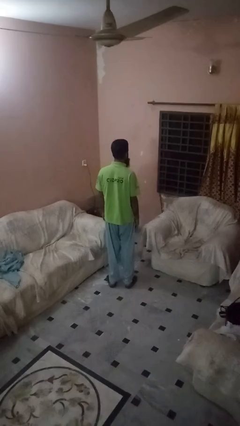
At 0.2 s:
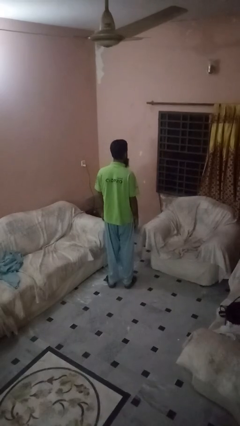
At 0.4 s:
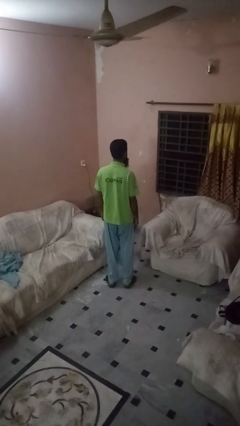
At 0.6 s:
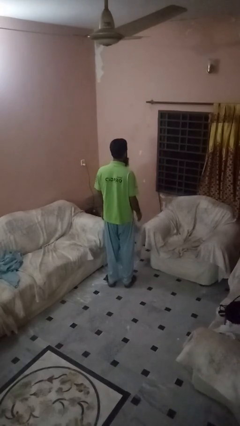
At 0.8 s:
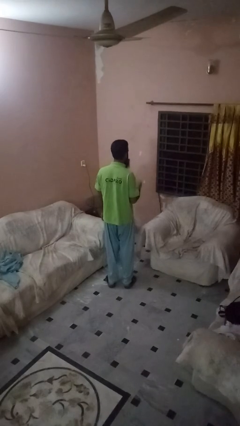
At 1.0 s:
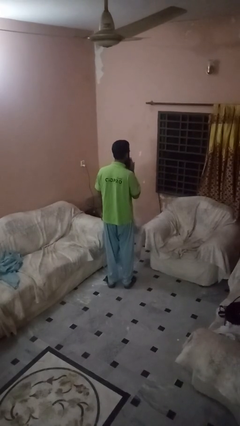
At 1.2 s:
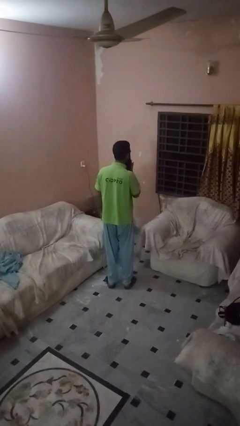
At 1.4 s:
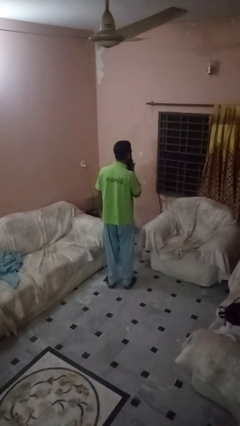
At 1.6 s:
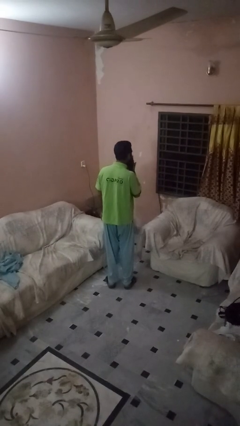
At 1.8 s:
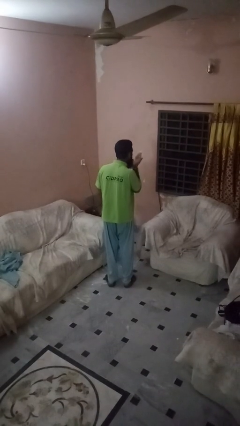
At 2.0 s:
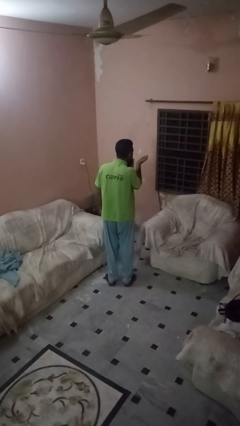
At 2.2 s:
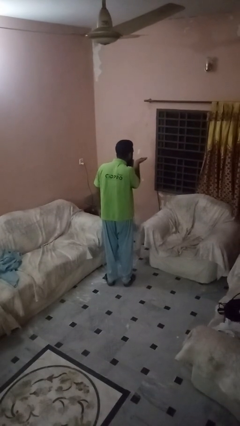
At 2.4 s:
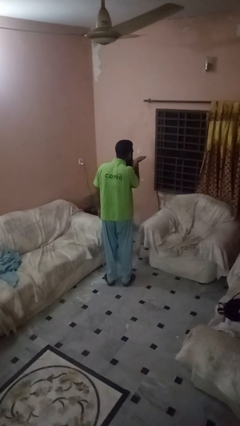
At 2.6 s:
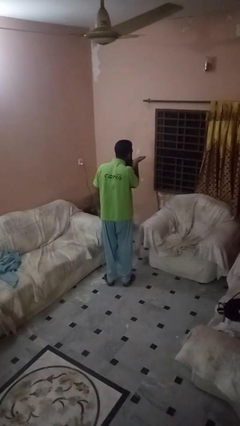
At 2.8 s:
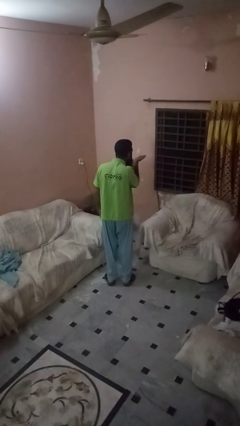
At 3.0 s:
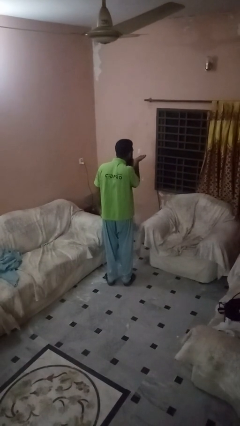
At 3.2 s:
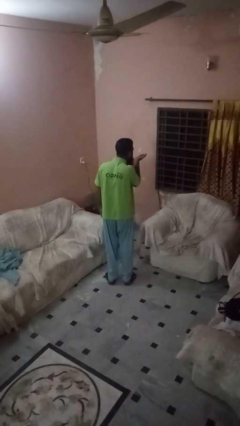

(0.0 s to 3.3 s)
person gestures blow kiss

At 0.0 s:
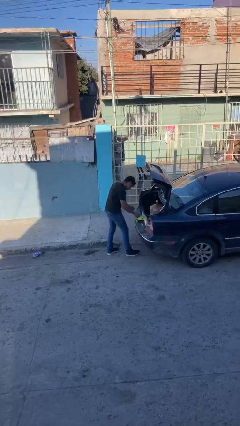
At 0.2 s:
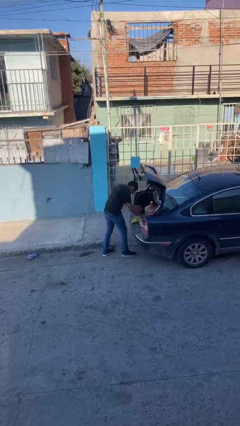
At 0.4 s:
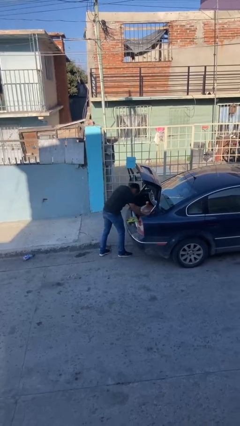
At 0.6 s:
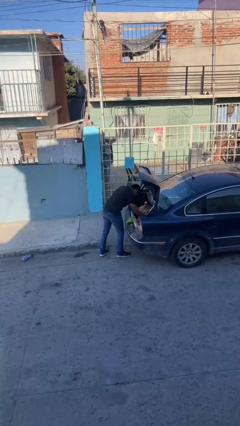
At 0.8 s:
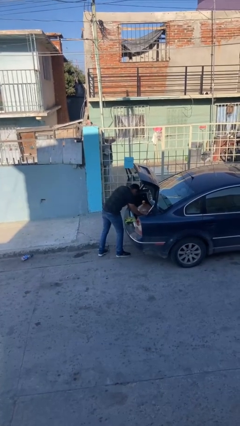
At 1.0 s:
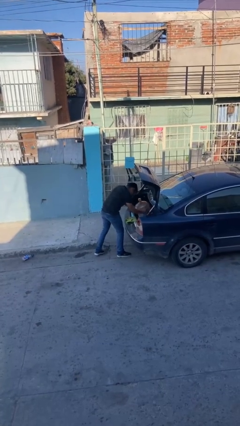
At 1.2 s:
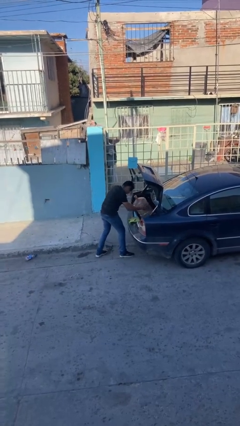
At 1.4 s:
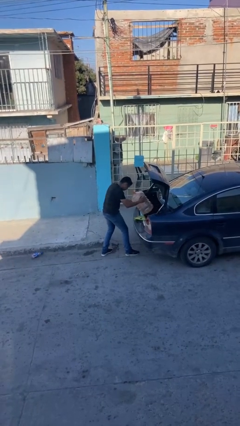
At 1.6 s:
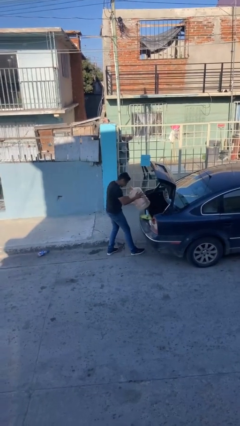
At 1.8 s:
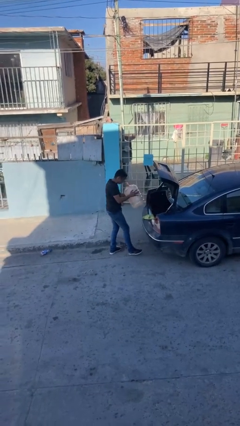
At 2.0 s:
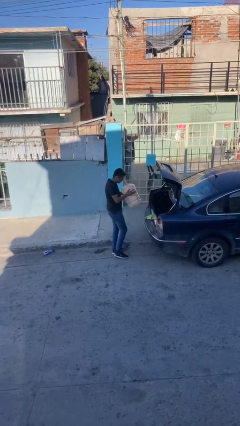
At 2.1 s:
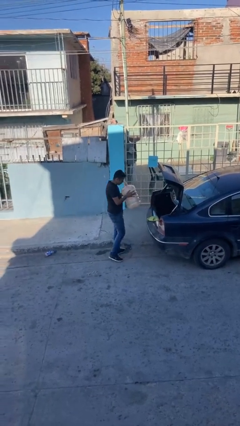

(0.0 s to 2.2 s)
person unloads car

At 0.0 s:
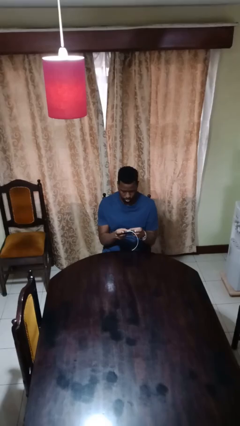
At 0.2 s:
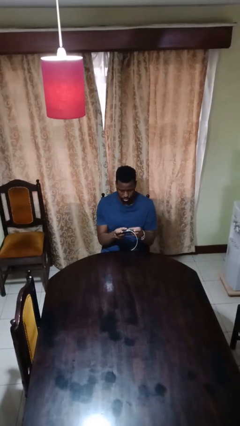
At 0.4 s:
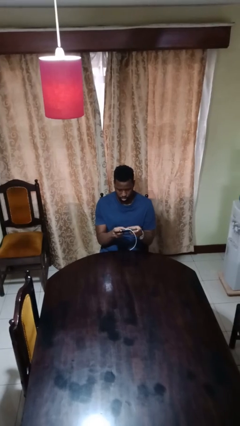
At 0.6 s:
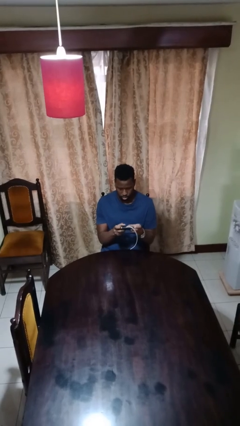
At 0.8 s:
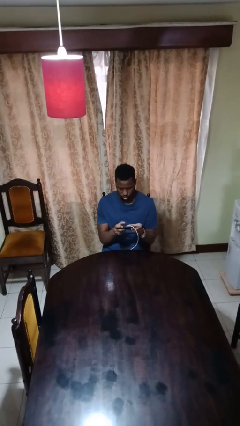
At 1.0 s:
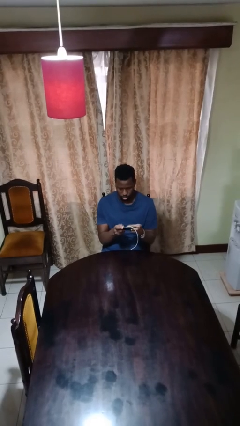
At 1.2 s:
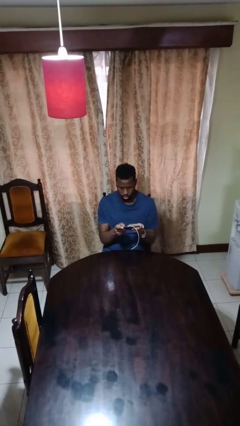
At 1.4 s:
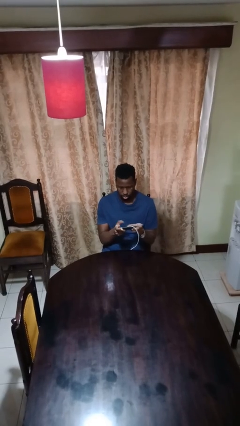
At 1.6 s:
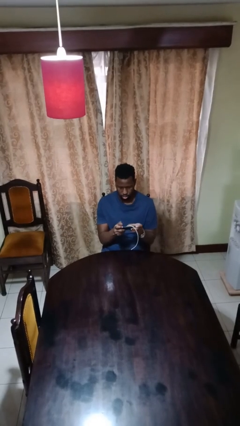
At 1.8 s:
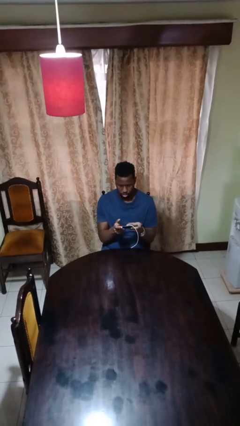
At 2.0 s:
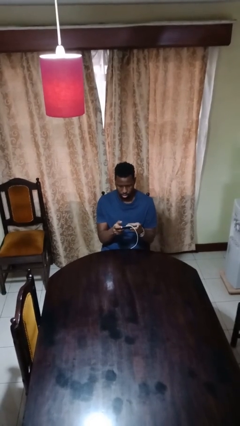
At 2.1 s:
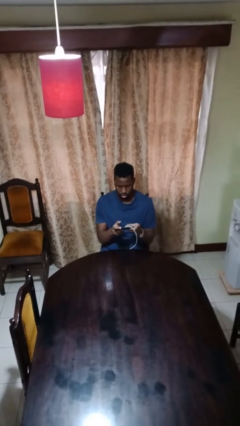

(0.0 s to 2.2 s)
person interacts with handheld game

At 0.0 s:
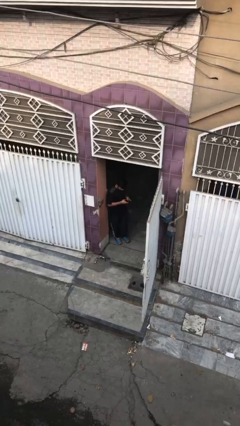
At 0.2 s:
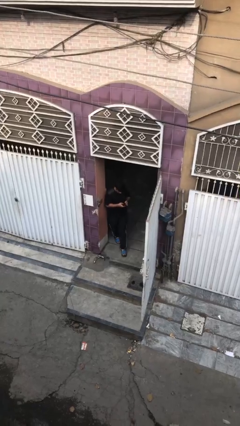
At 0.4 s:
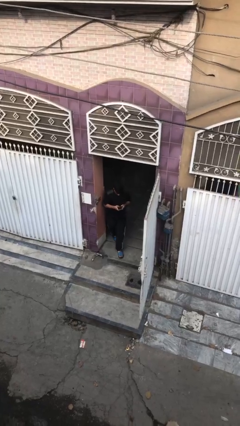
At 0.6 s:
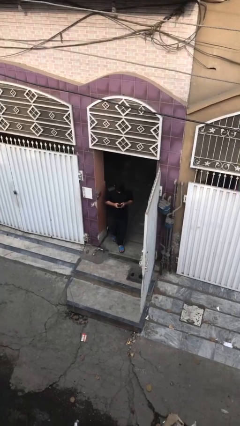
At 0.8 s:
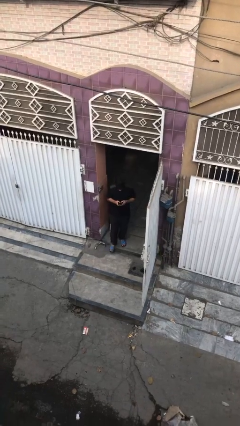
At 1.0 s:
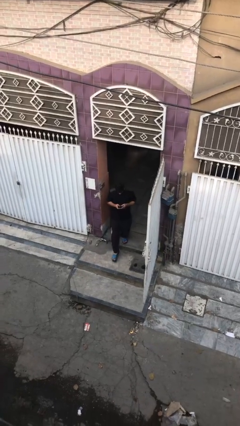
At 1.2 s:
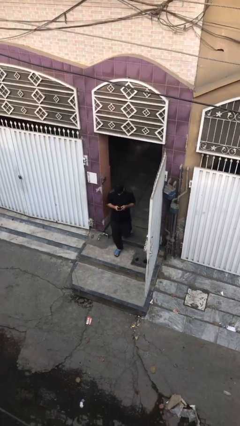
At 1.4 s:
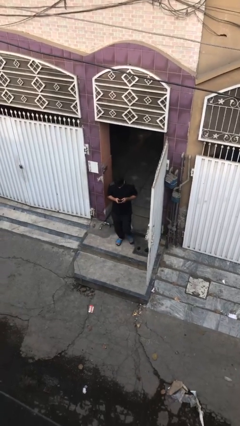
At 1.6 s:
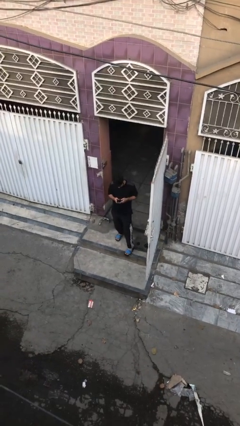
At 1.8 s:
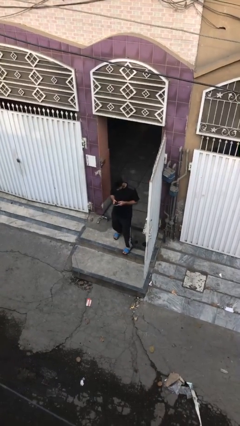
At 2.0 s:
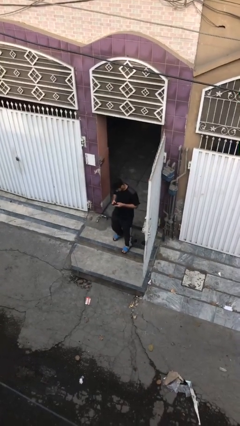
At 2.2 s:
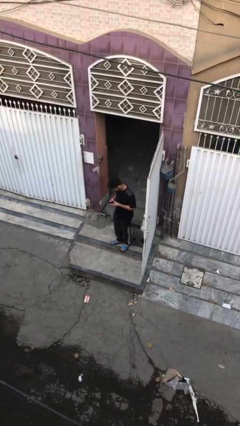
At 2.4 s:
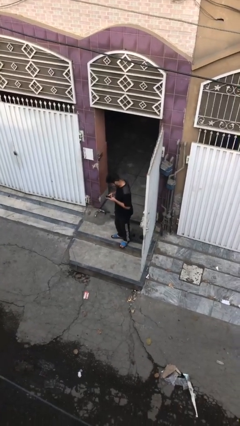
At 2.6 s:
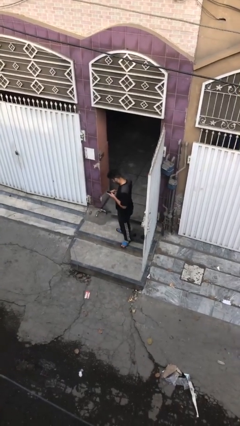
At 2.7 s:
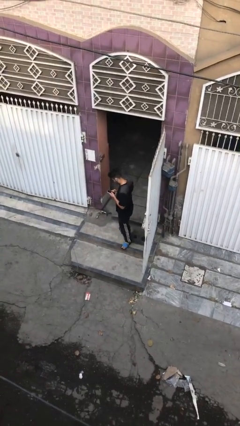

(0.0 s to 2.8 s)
person enters scene through structure

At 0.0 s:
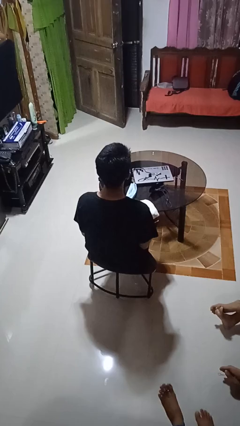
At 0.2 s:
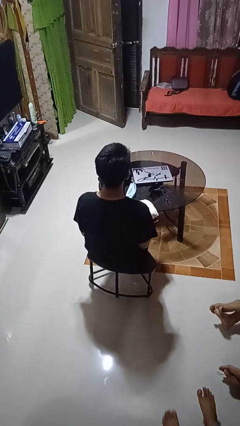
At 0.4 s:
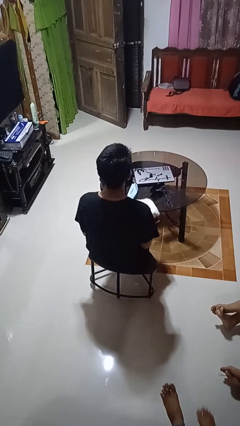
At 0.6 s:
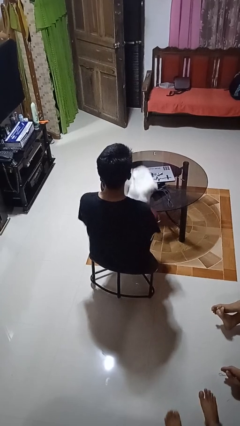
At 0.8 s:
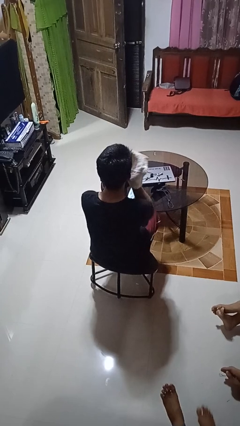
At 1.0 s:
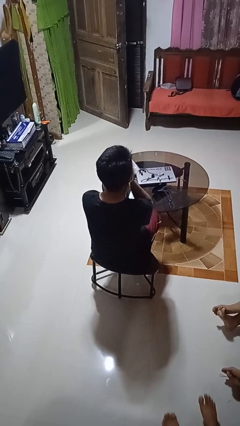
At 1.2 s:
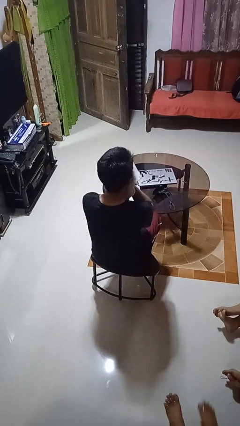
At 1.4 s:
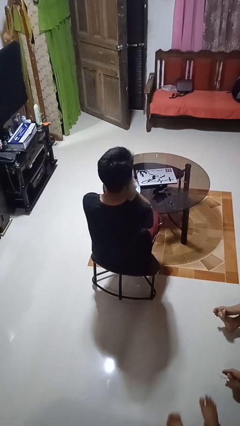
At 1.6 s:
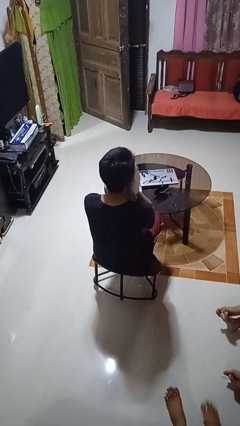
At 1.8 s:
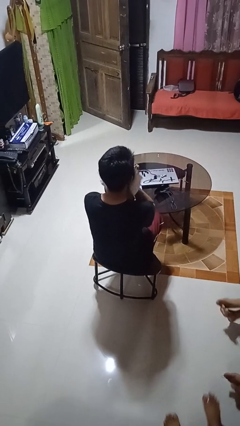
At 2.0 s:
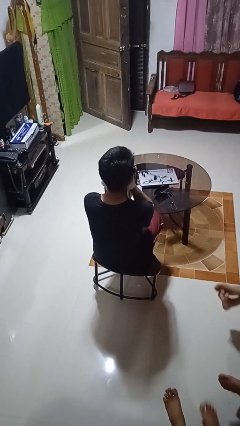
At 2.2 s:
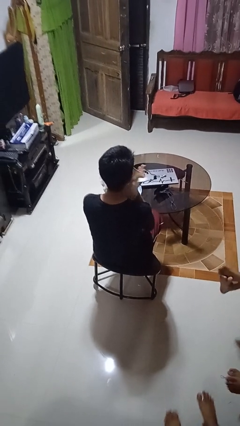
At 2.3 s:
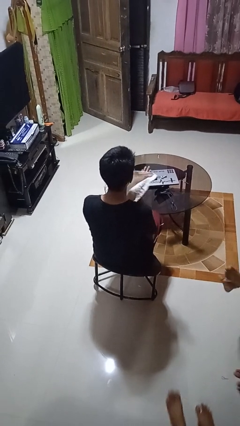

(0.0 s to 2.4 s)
person wipes mouth with napkin

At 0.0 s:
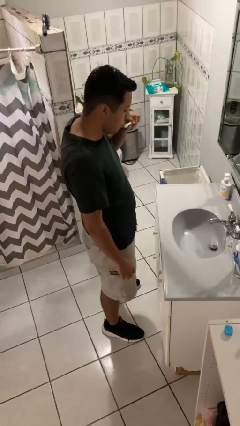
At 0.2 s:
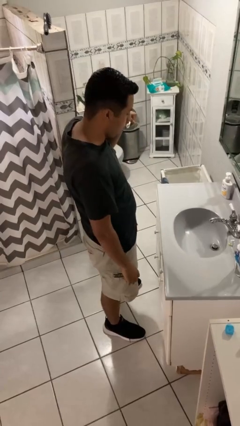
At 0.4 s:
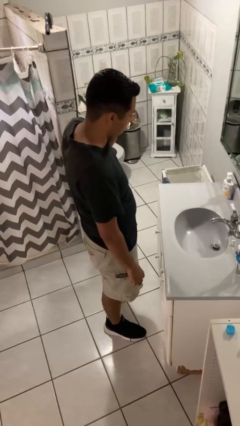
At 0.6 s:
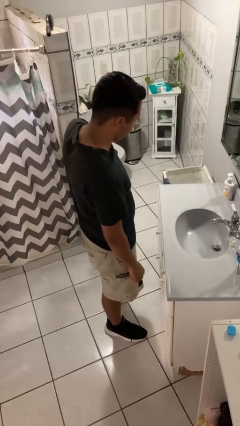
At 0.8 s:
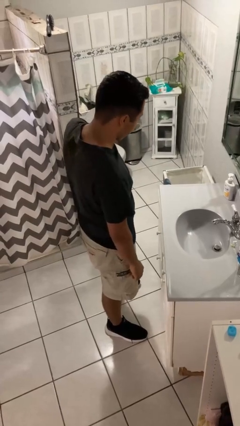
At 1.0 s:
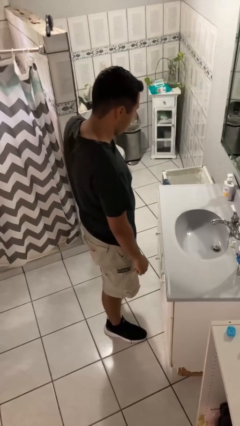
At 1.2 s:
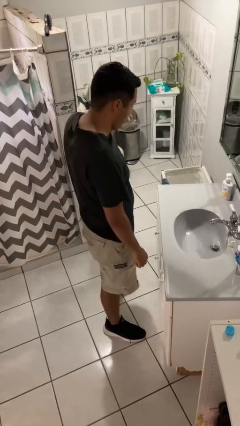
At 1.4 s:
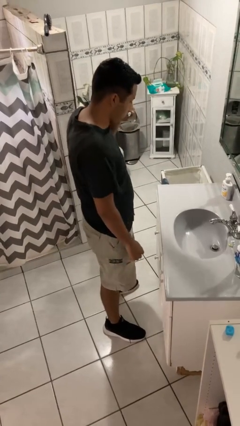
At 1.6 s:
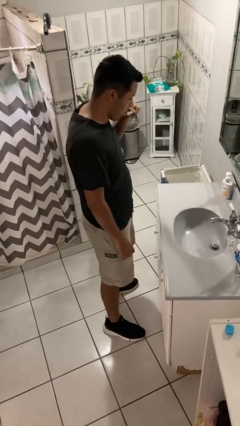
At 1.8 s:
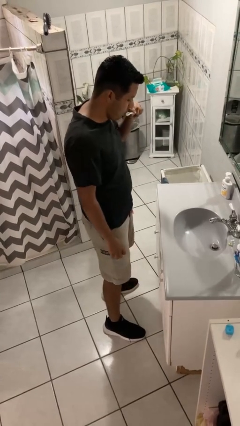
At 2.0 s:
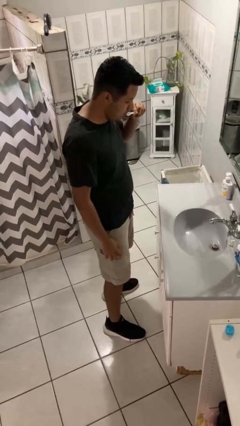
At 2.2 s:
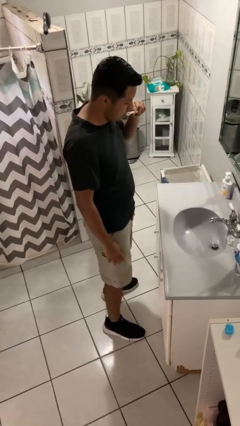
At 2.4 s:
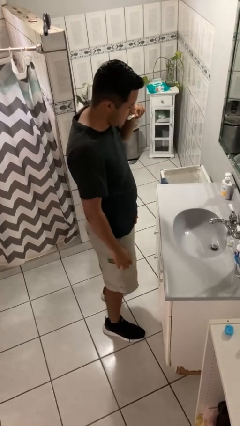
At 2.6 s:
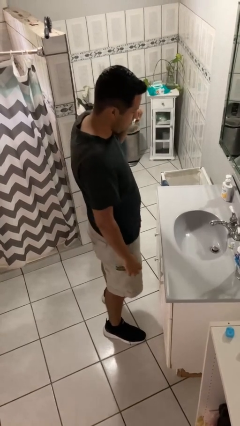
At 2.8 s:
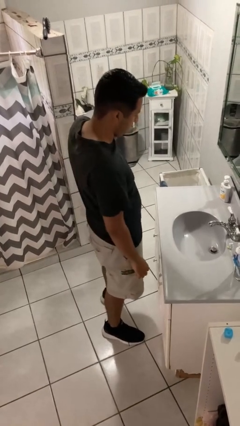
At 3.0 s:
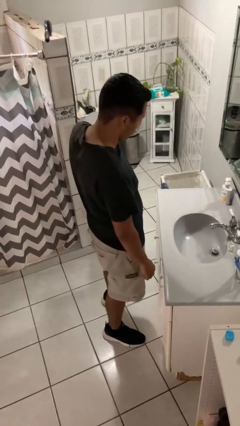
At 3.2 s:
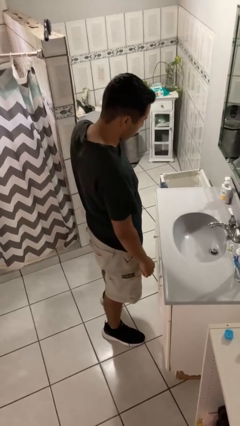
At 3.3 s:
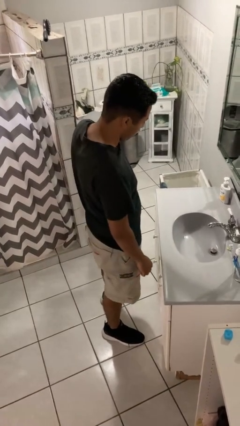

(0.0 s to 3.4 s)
person brushes teeth

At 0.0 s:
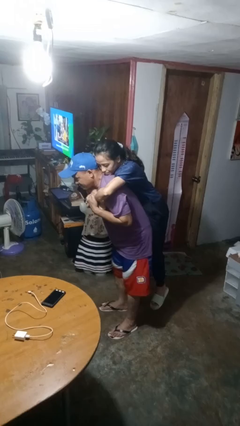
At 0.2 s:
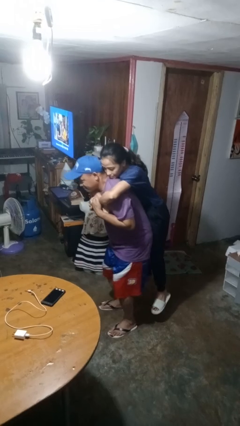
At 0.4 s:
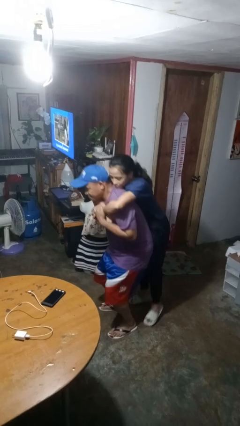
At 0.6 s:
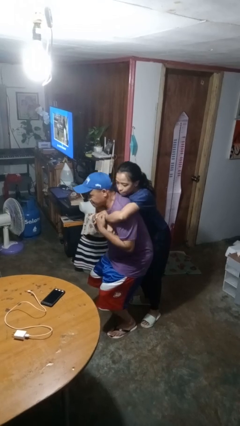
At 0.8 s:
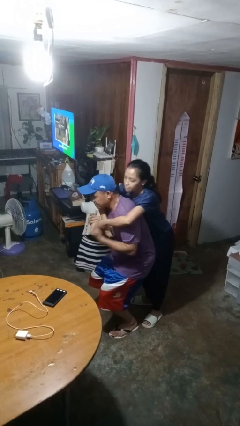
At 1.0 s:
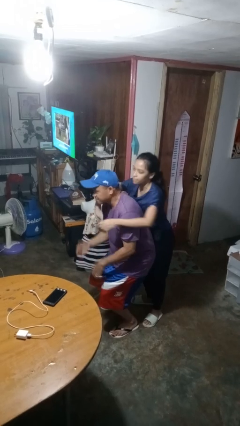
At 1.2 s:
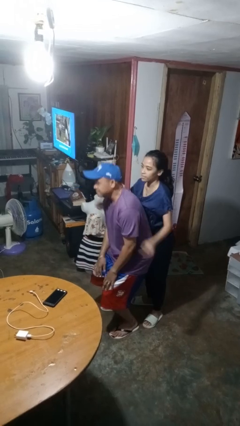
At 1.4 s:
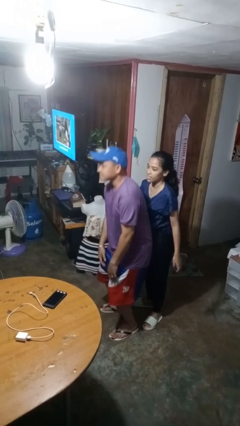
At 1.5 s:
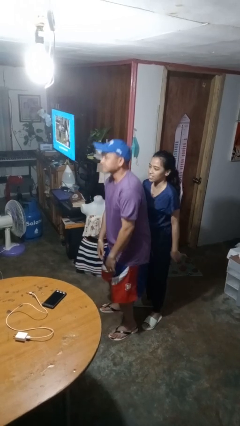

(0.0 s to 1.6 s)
person puts down person
